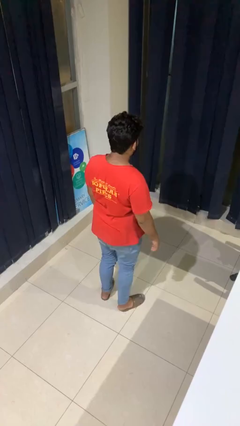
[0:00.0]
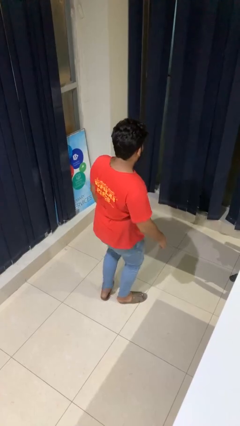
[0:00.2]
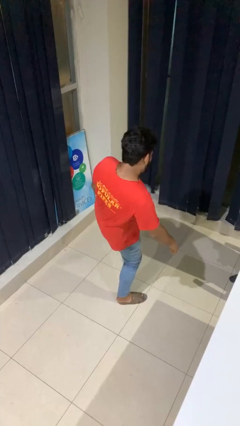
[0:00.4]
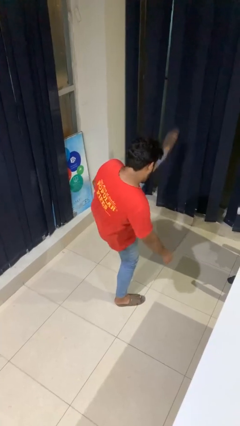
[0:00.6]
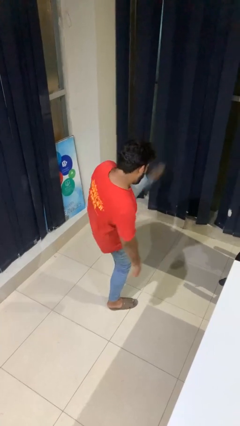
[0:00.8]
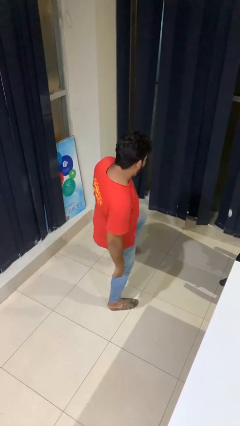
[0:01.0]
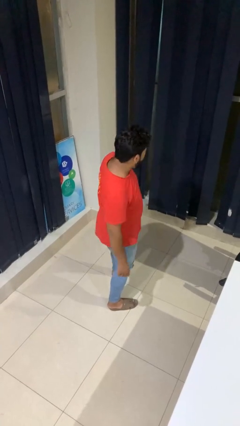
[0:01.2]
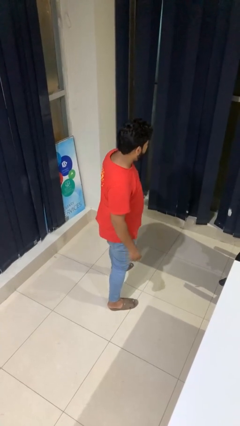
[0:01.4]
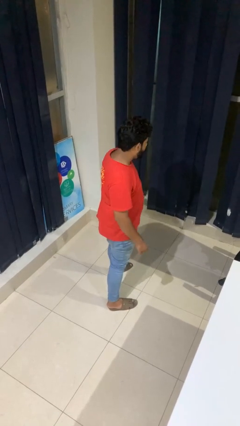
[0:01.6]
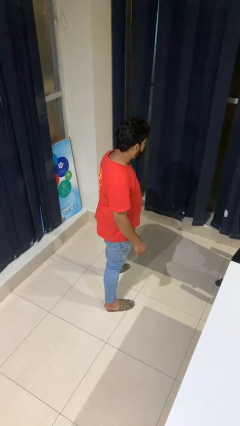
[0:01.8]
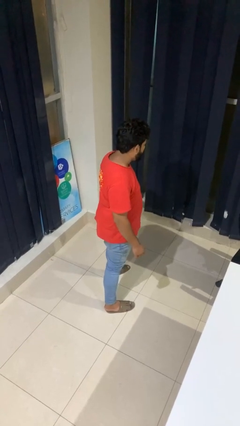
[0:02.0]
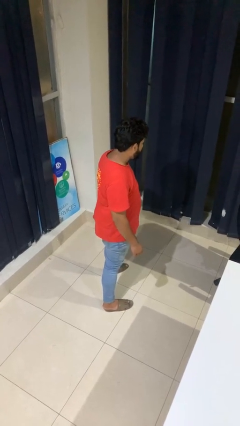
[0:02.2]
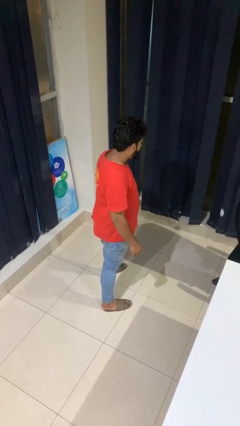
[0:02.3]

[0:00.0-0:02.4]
person karate kicks

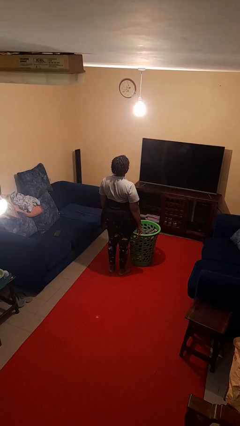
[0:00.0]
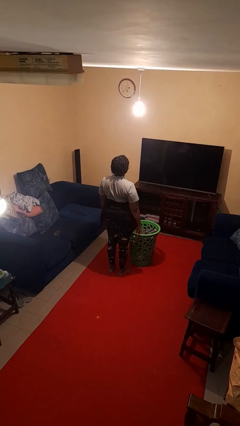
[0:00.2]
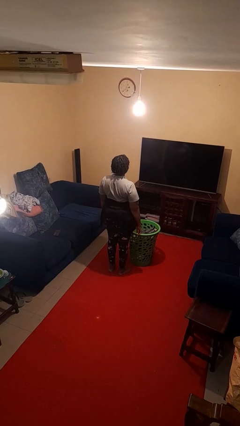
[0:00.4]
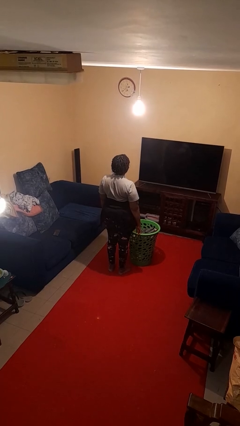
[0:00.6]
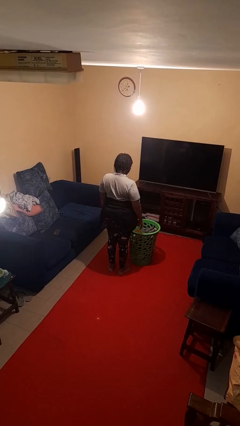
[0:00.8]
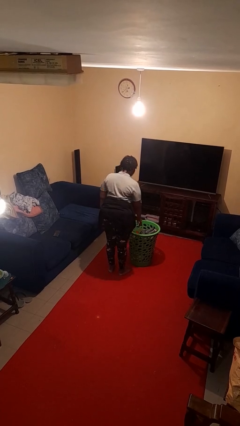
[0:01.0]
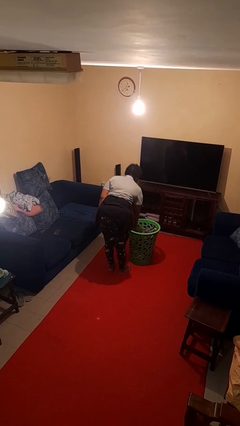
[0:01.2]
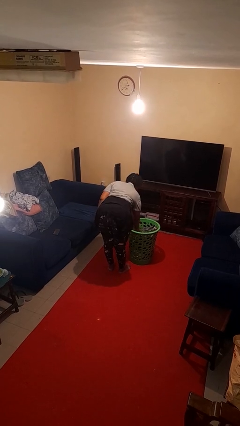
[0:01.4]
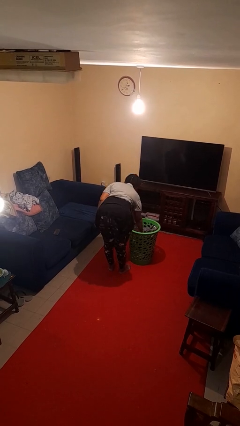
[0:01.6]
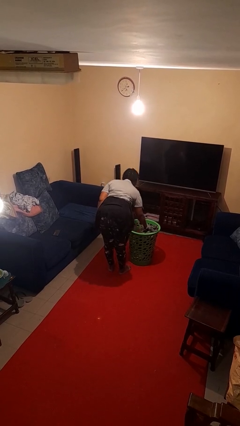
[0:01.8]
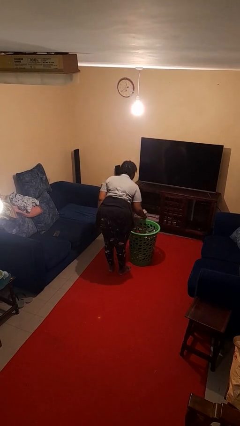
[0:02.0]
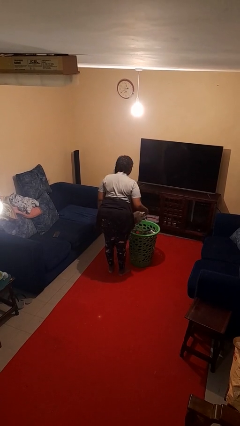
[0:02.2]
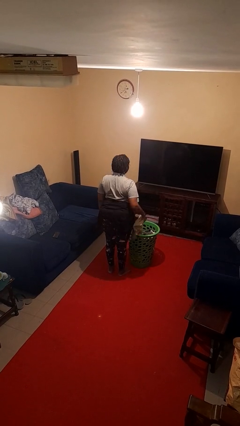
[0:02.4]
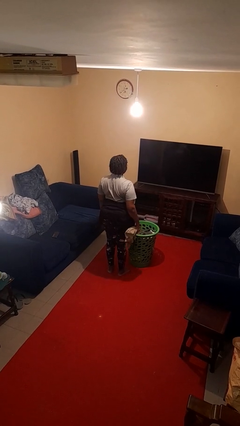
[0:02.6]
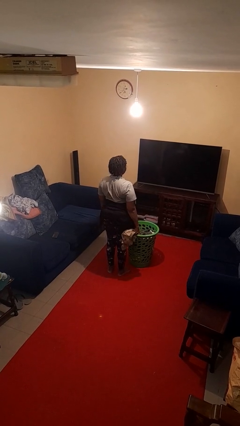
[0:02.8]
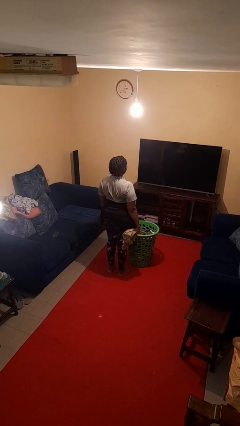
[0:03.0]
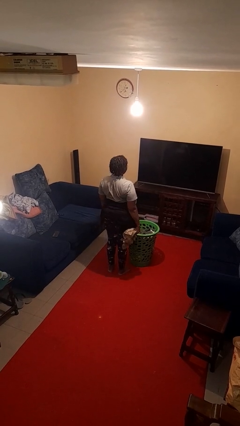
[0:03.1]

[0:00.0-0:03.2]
person takes object from basket

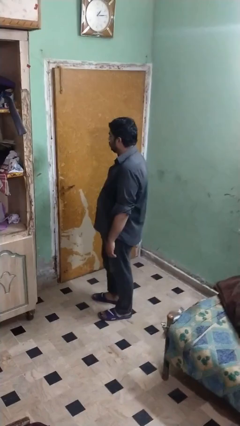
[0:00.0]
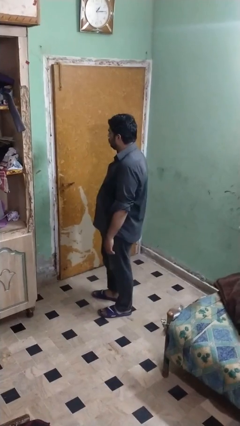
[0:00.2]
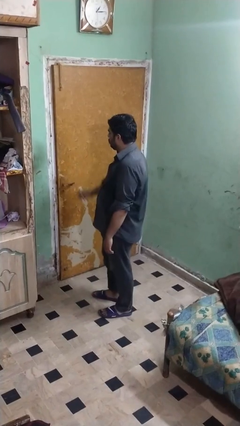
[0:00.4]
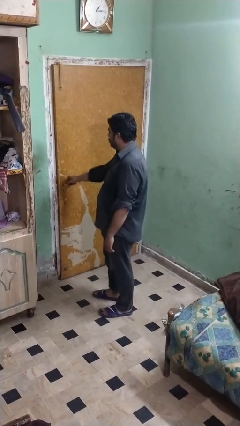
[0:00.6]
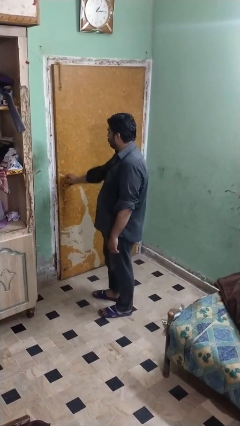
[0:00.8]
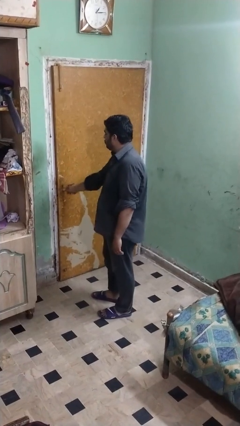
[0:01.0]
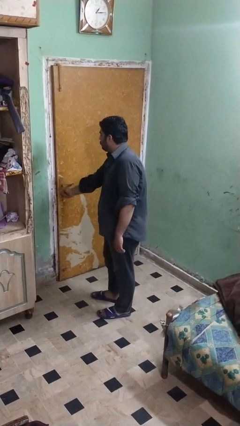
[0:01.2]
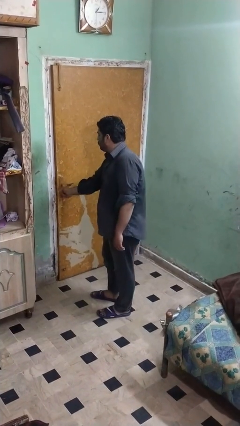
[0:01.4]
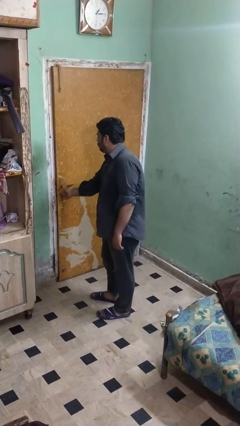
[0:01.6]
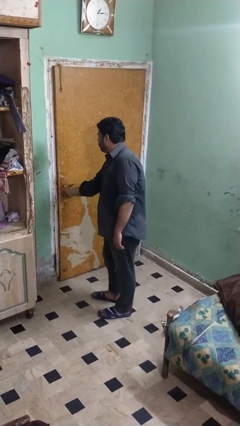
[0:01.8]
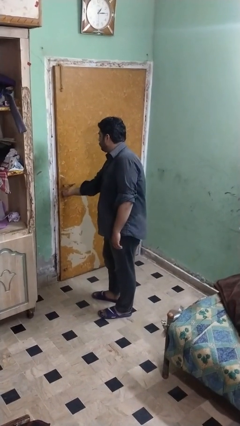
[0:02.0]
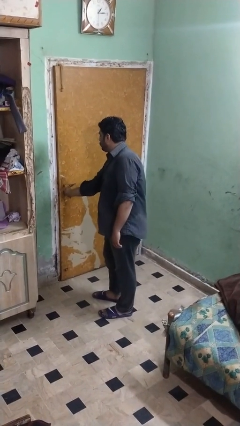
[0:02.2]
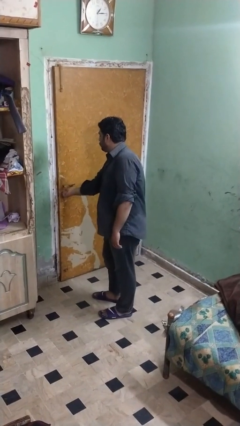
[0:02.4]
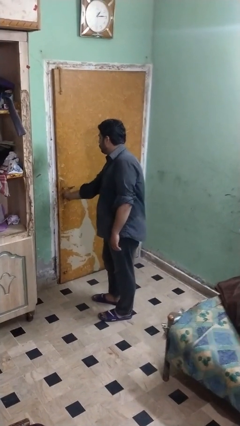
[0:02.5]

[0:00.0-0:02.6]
person unlocks door with keys

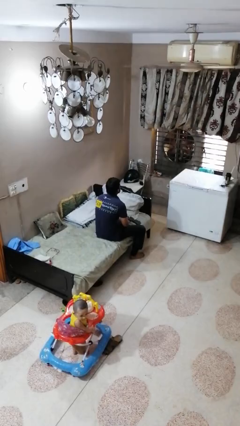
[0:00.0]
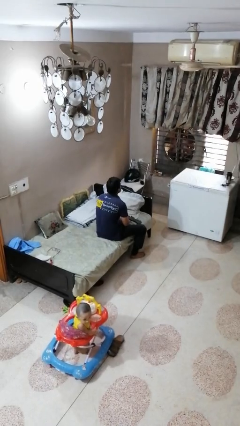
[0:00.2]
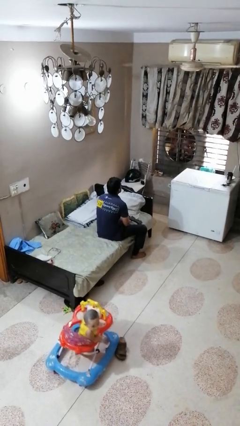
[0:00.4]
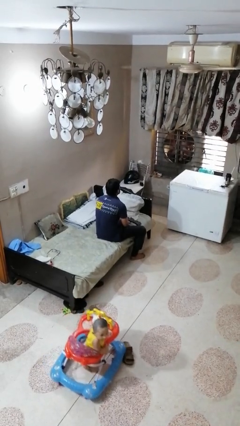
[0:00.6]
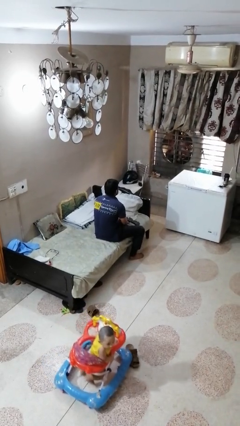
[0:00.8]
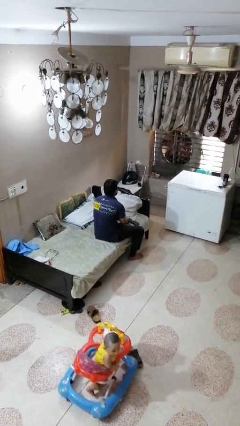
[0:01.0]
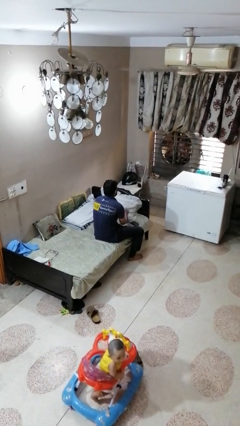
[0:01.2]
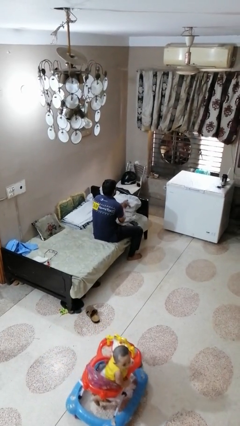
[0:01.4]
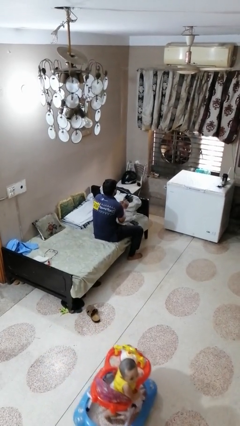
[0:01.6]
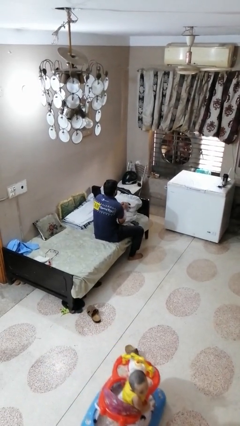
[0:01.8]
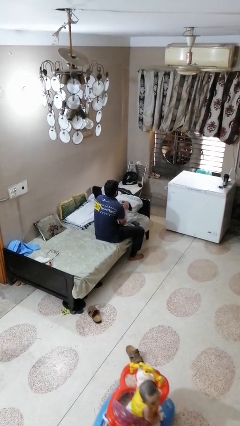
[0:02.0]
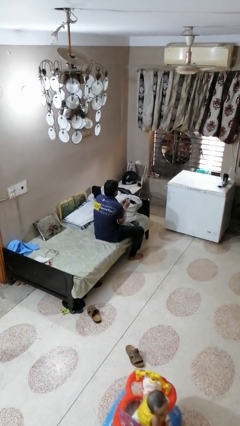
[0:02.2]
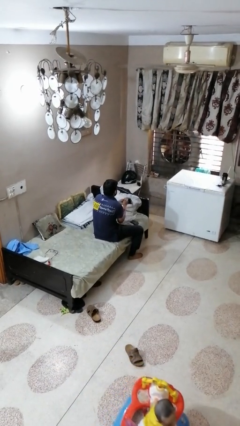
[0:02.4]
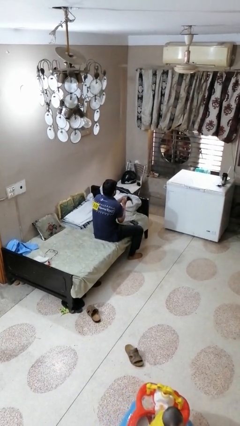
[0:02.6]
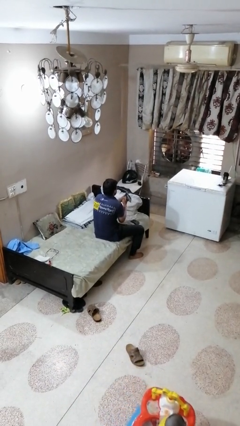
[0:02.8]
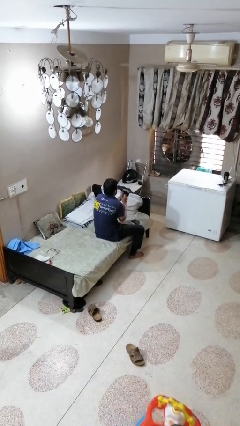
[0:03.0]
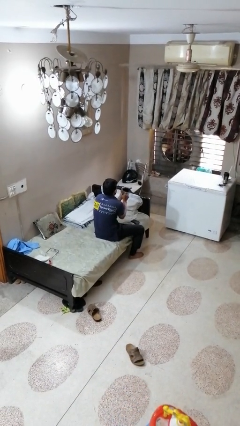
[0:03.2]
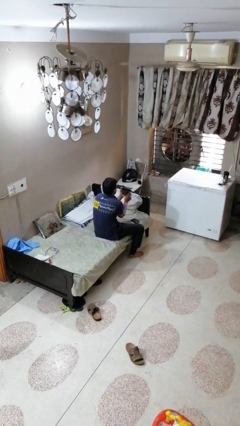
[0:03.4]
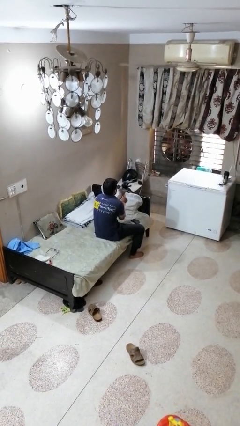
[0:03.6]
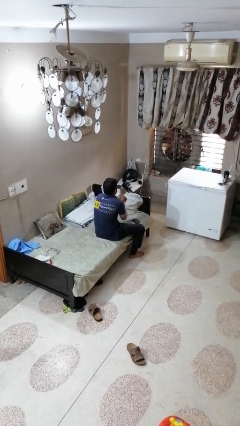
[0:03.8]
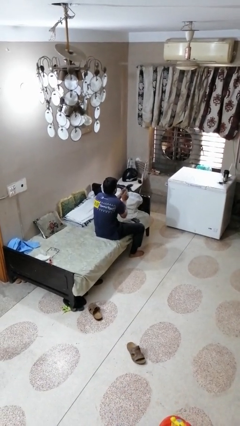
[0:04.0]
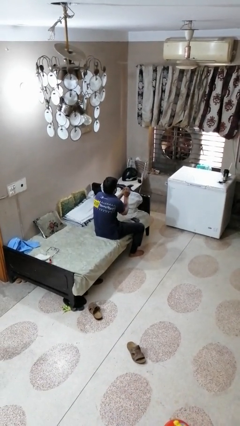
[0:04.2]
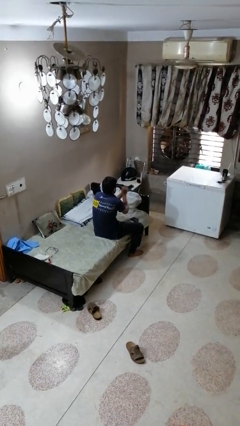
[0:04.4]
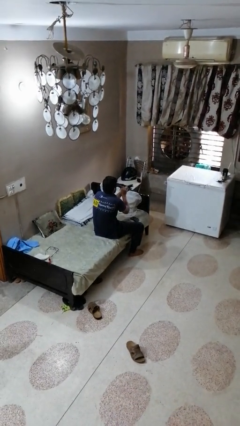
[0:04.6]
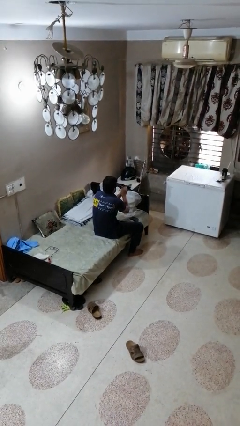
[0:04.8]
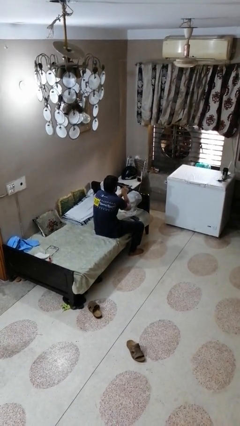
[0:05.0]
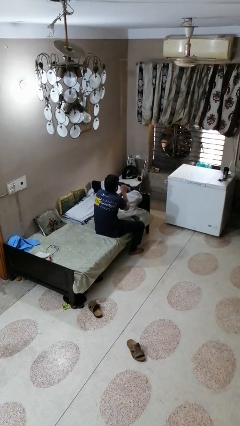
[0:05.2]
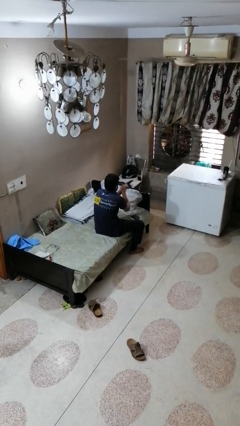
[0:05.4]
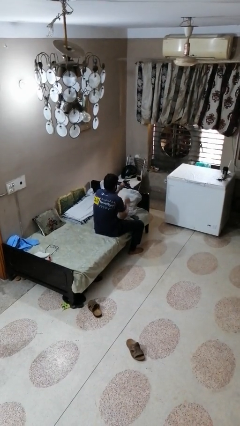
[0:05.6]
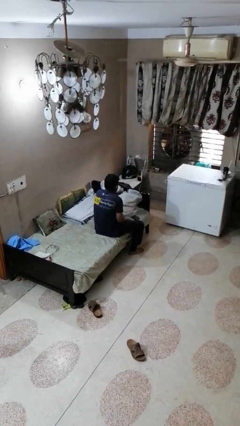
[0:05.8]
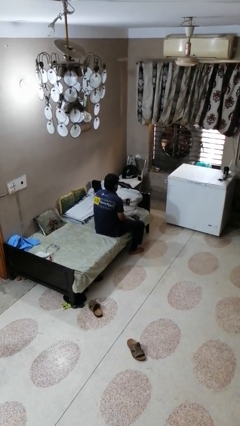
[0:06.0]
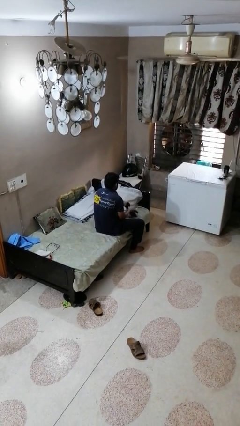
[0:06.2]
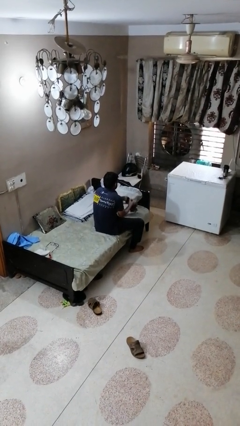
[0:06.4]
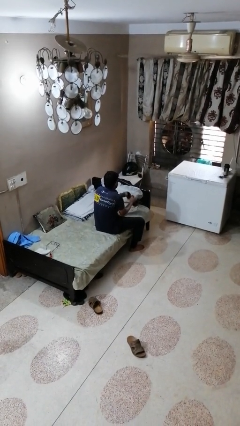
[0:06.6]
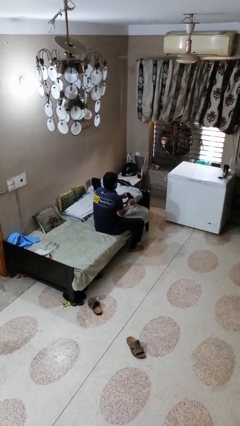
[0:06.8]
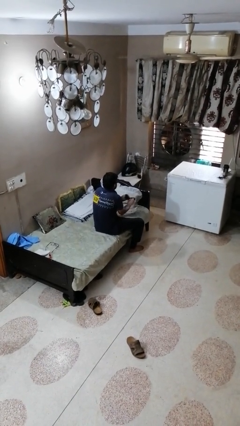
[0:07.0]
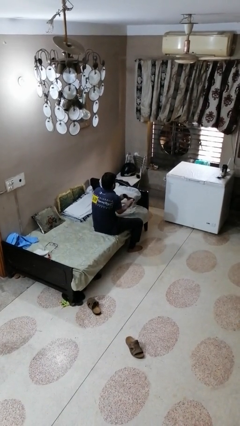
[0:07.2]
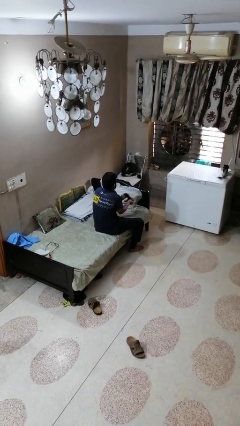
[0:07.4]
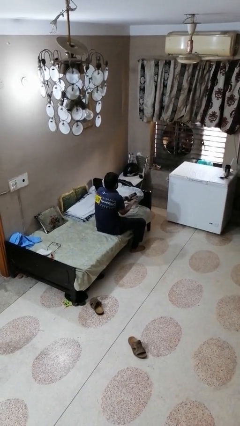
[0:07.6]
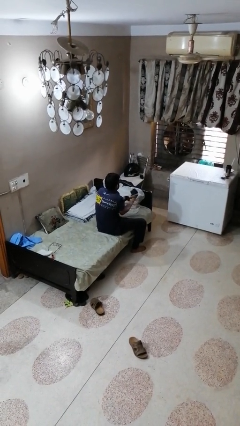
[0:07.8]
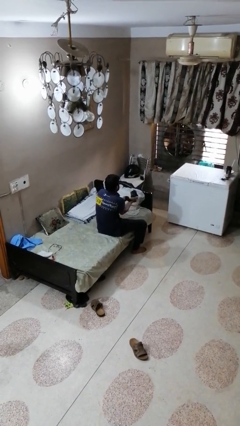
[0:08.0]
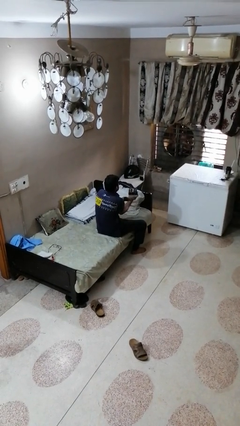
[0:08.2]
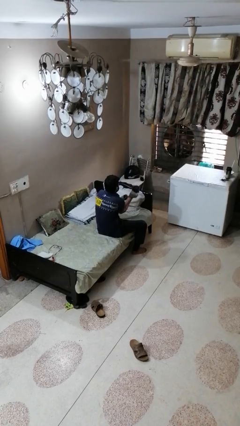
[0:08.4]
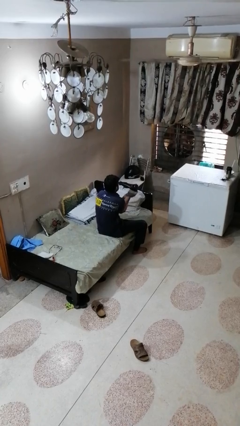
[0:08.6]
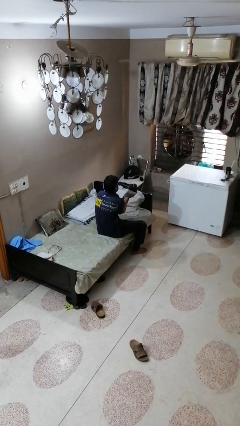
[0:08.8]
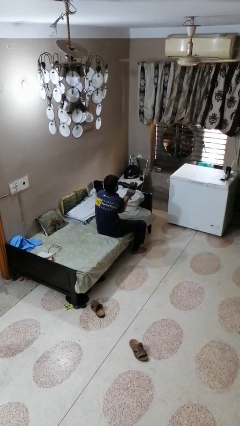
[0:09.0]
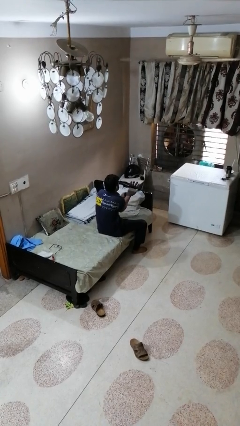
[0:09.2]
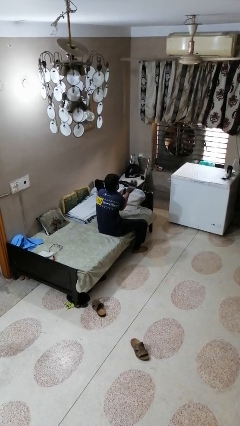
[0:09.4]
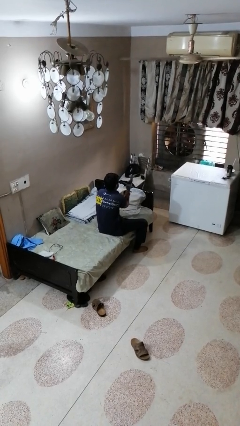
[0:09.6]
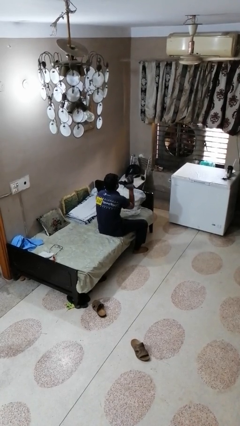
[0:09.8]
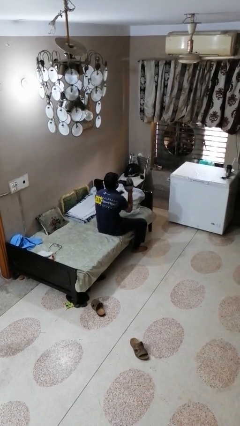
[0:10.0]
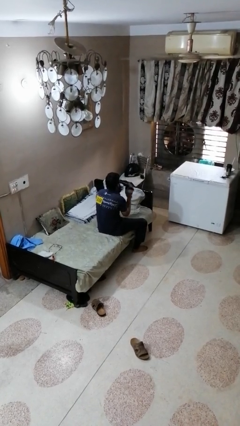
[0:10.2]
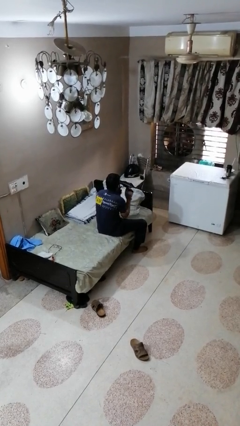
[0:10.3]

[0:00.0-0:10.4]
person puts on gloves
